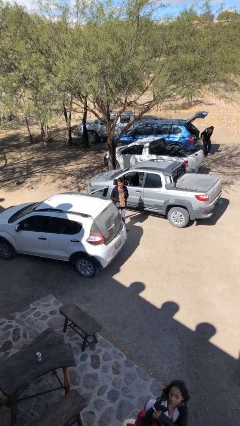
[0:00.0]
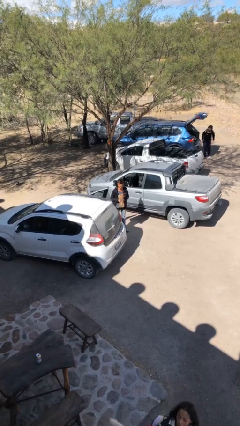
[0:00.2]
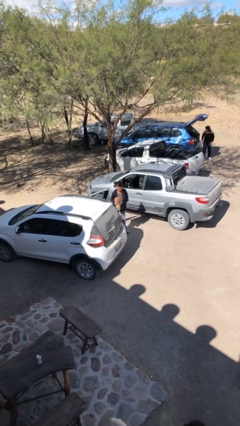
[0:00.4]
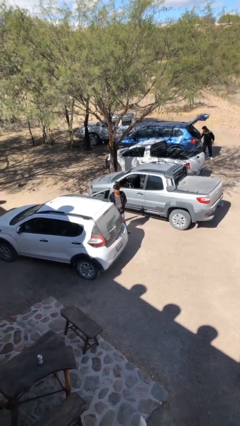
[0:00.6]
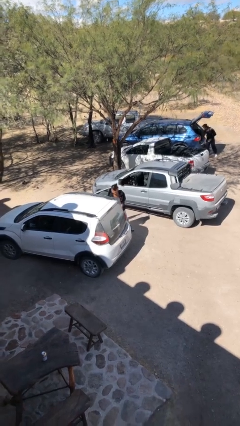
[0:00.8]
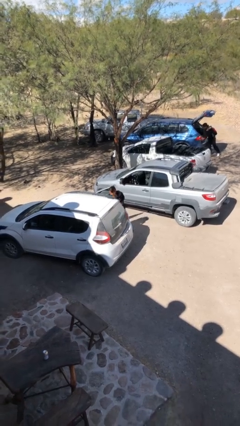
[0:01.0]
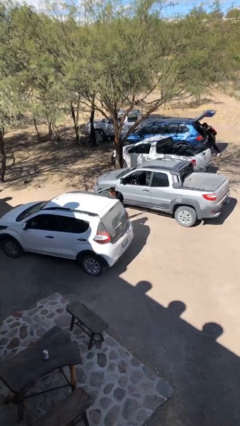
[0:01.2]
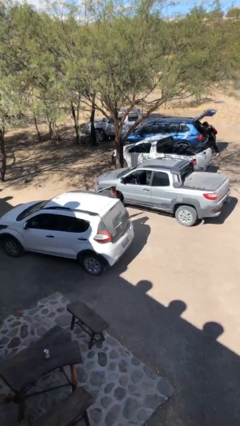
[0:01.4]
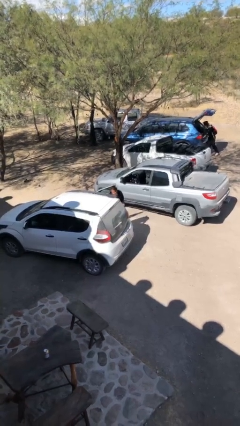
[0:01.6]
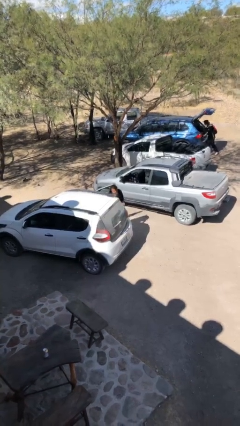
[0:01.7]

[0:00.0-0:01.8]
person loads car

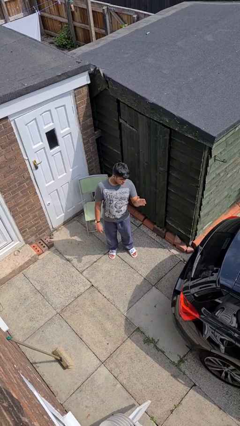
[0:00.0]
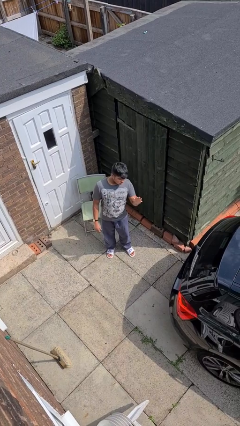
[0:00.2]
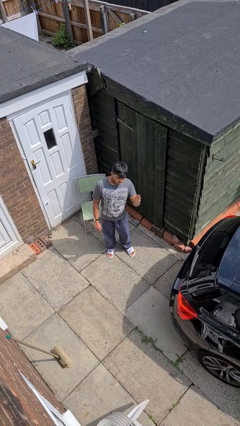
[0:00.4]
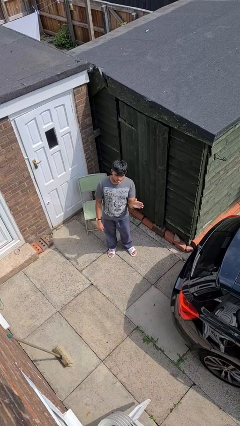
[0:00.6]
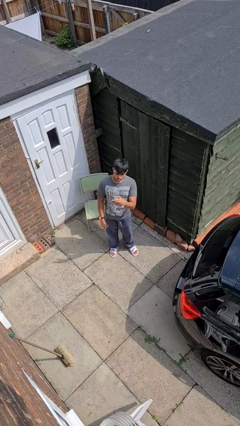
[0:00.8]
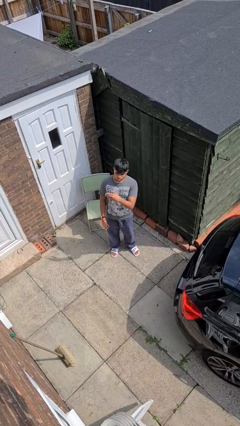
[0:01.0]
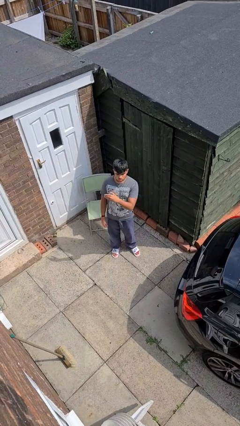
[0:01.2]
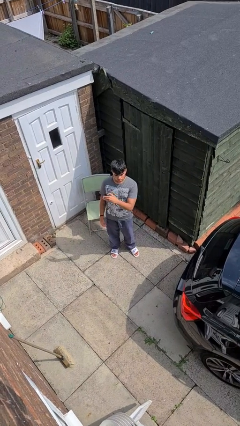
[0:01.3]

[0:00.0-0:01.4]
person gestures swipe right

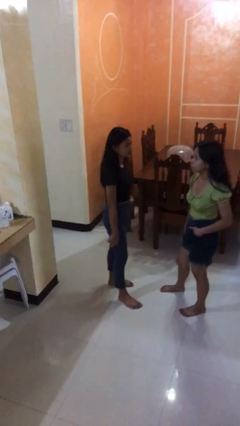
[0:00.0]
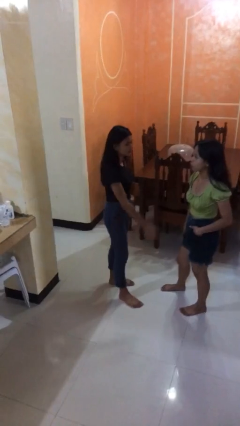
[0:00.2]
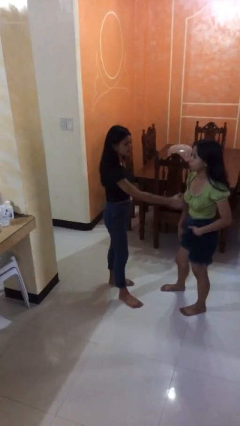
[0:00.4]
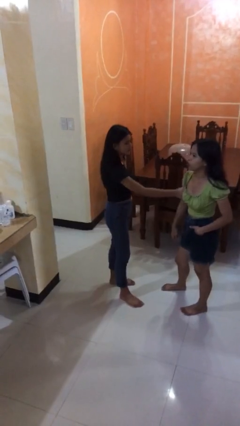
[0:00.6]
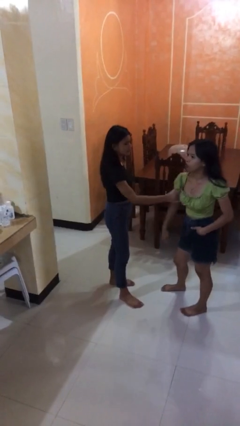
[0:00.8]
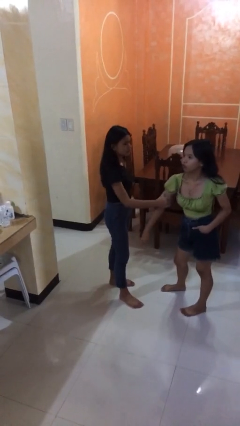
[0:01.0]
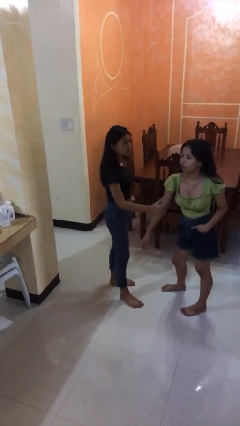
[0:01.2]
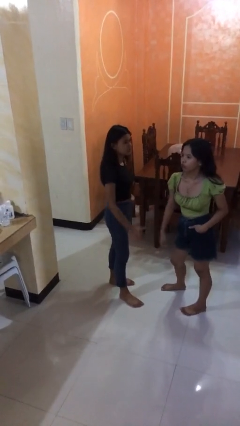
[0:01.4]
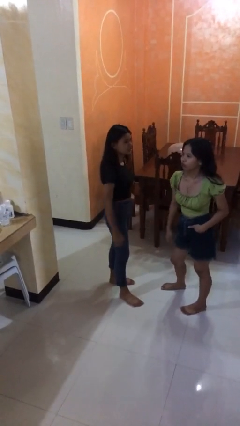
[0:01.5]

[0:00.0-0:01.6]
person grabs person by bicep

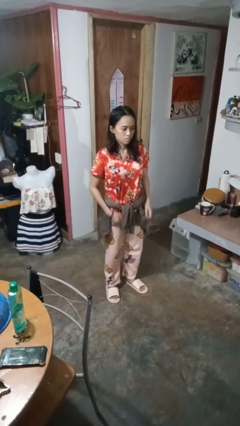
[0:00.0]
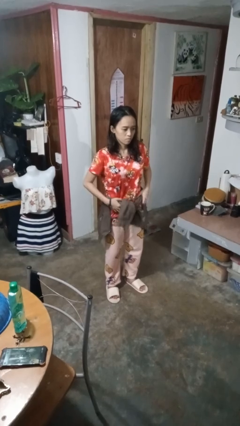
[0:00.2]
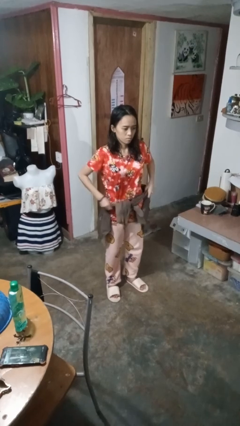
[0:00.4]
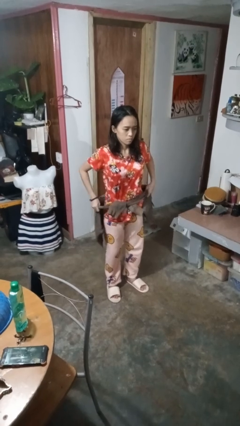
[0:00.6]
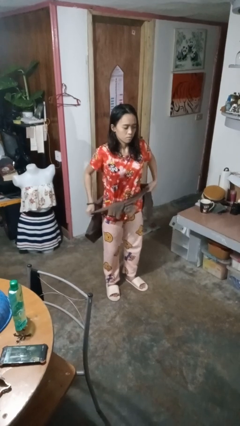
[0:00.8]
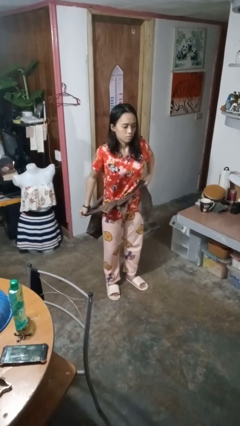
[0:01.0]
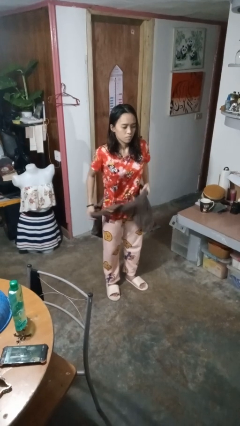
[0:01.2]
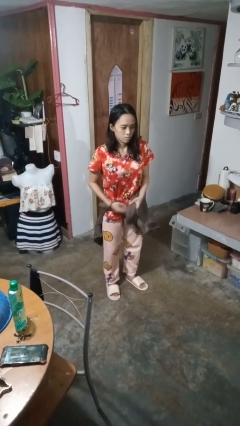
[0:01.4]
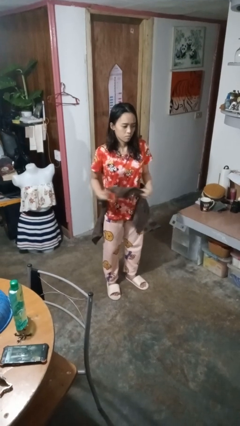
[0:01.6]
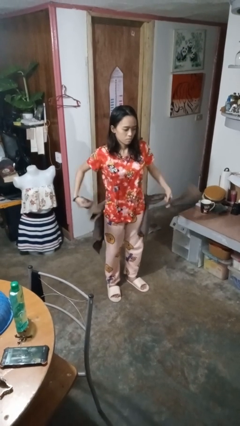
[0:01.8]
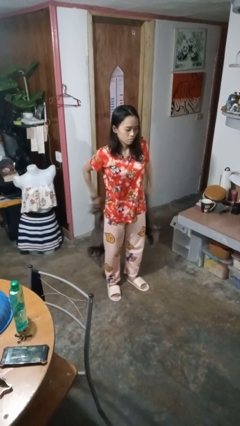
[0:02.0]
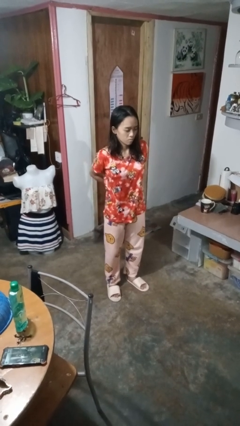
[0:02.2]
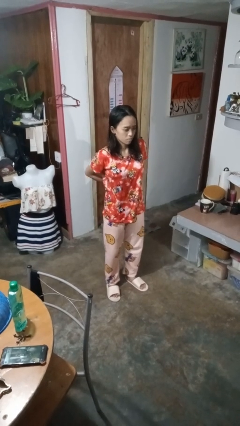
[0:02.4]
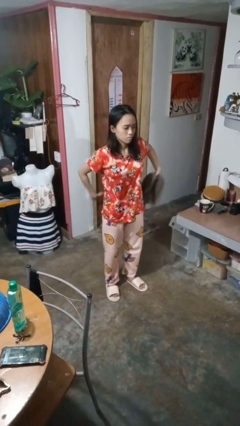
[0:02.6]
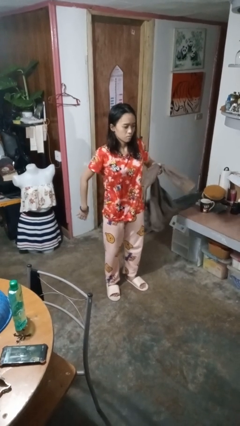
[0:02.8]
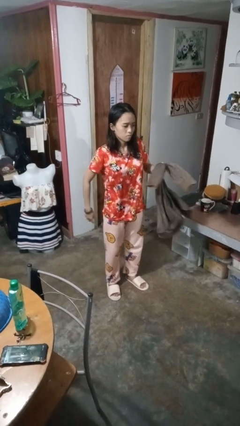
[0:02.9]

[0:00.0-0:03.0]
person unties jacket around waist

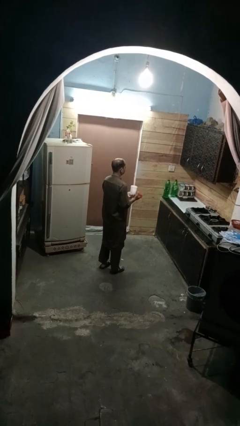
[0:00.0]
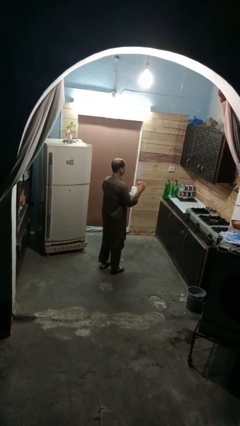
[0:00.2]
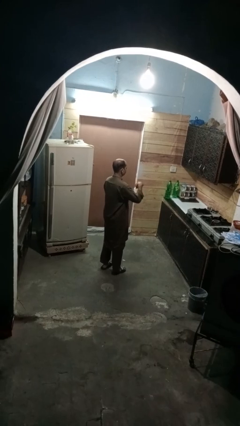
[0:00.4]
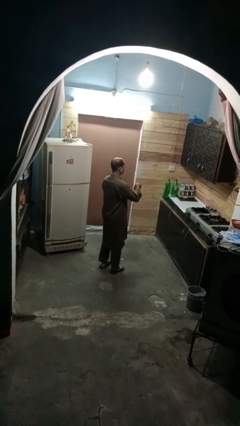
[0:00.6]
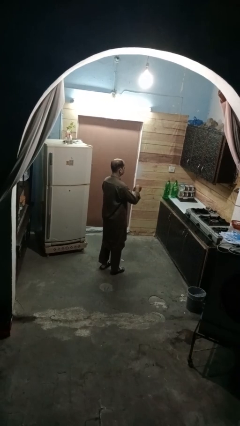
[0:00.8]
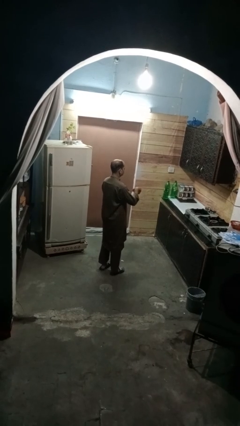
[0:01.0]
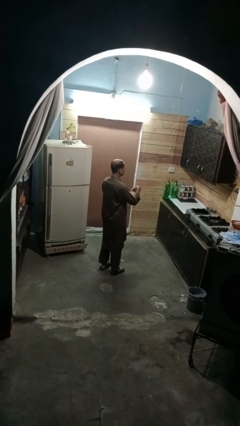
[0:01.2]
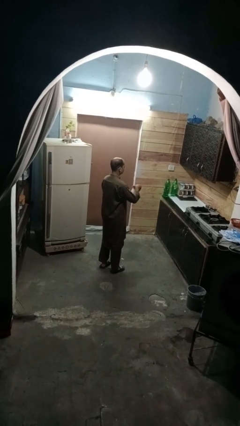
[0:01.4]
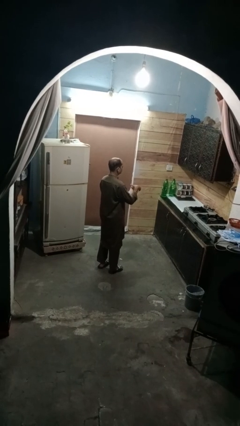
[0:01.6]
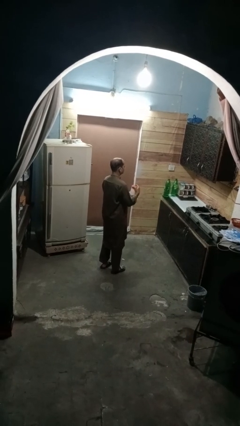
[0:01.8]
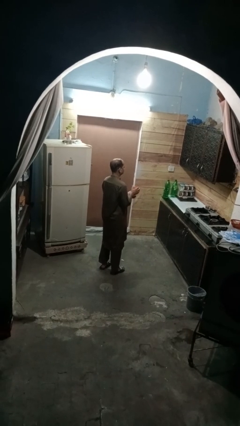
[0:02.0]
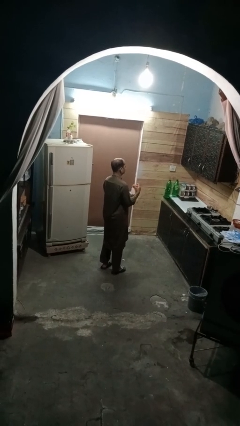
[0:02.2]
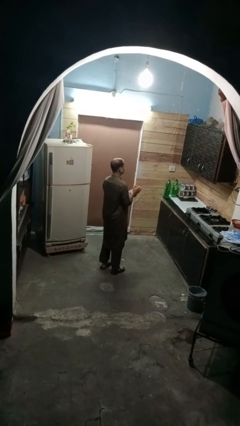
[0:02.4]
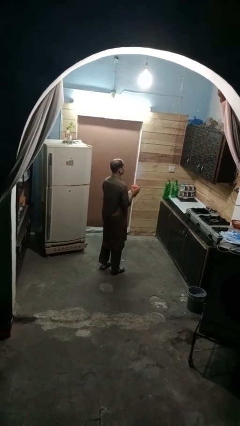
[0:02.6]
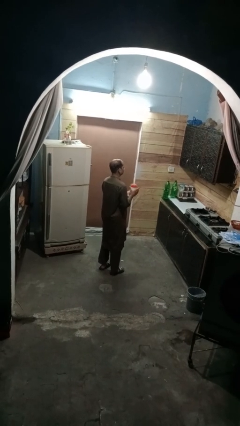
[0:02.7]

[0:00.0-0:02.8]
person closes jar

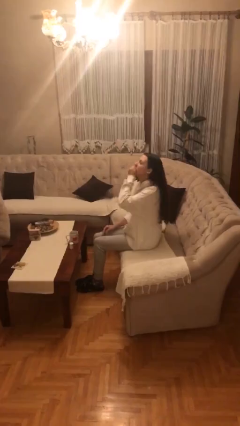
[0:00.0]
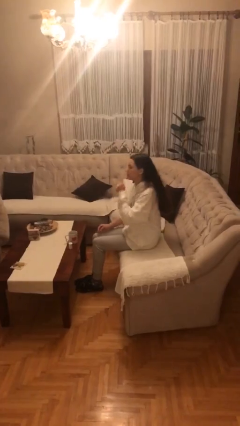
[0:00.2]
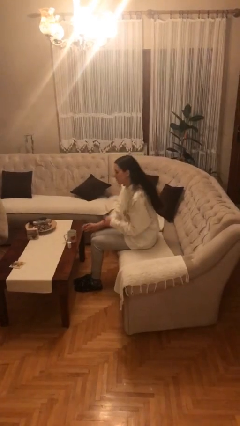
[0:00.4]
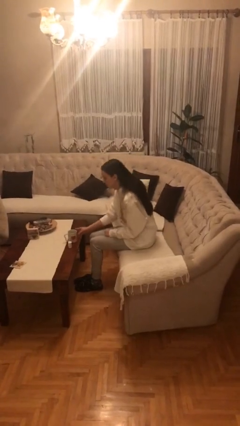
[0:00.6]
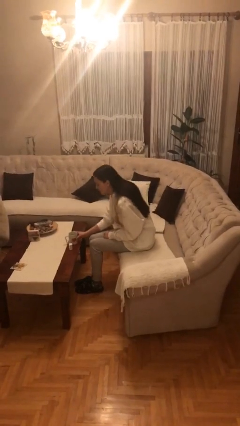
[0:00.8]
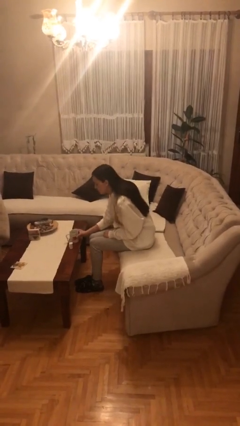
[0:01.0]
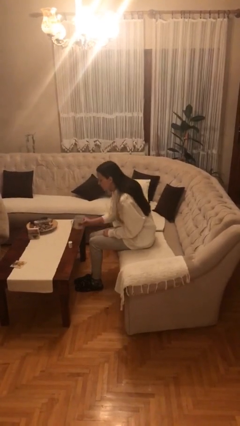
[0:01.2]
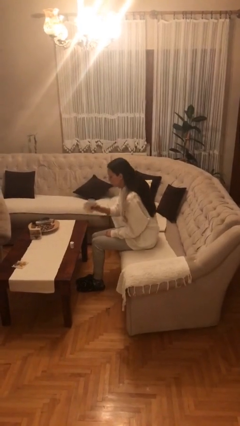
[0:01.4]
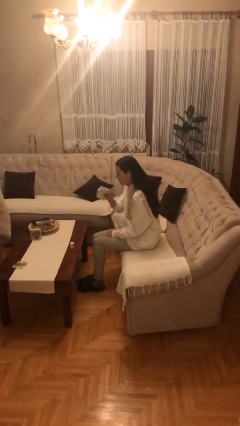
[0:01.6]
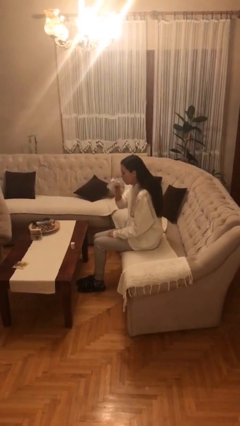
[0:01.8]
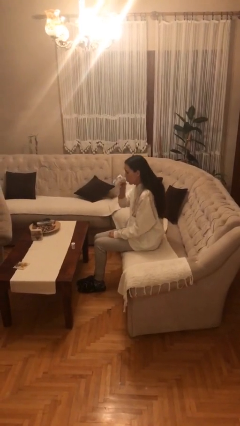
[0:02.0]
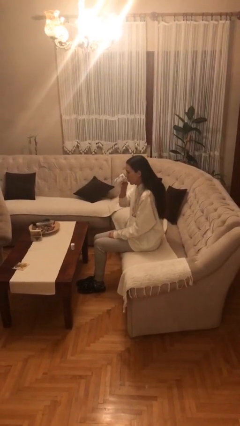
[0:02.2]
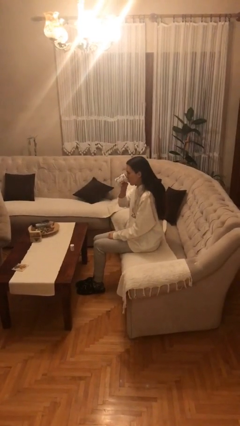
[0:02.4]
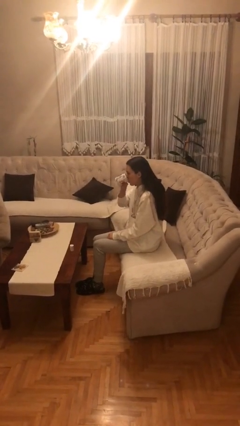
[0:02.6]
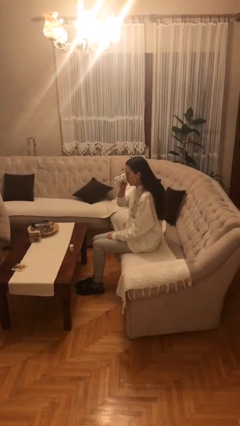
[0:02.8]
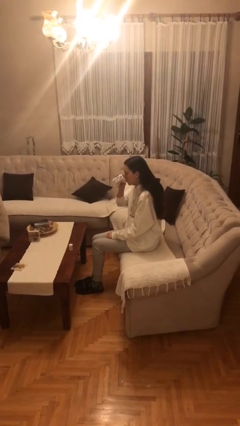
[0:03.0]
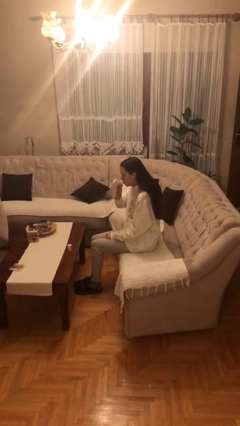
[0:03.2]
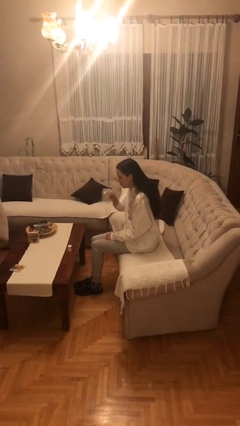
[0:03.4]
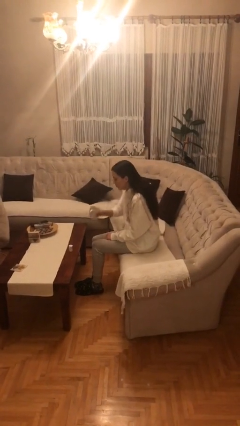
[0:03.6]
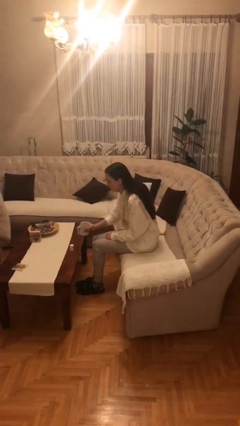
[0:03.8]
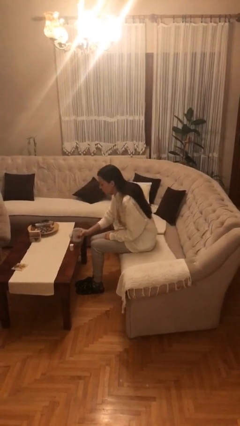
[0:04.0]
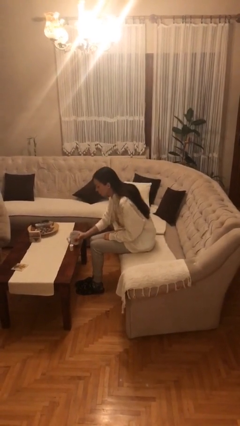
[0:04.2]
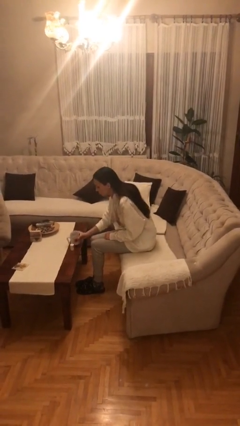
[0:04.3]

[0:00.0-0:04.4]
person drinks from cup

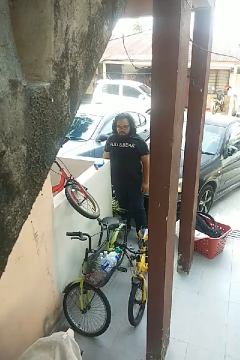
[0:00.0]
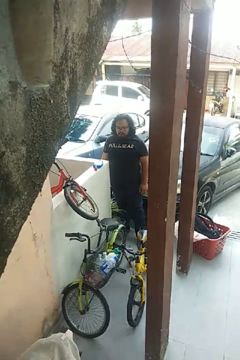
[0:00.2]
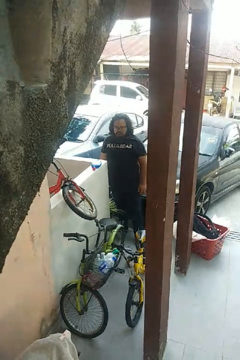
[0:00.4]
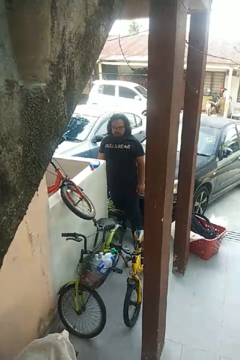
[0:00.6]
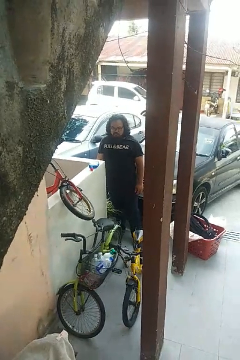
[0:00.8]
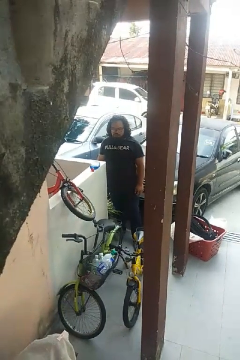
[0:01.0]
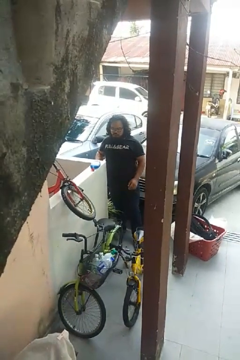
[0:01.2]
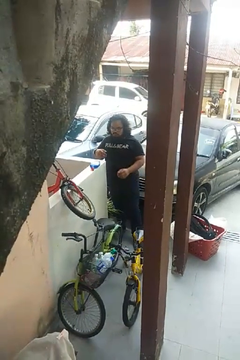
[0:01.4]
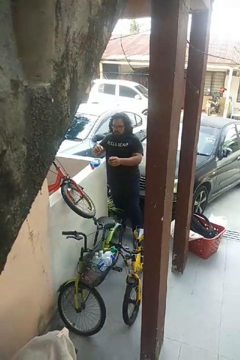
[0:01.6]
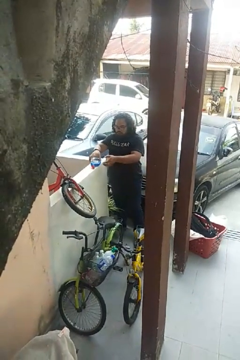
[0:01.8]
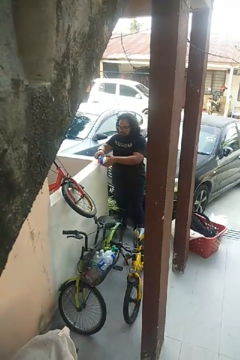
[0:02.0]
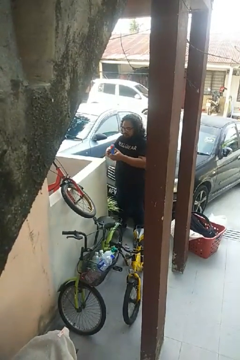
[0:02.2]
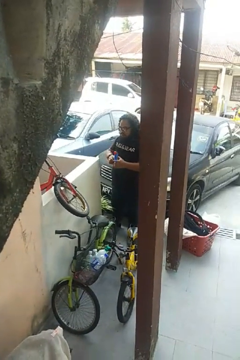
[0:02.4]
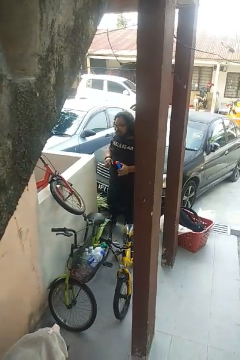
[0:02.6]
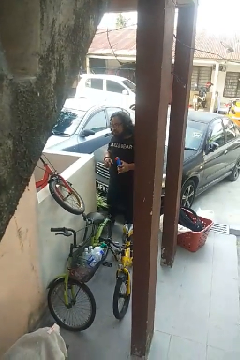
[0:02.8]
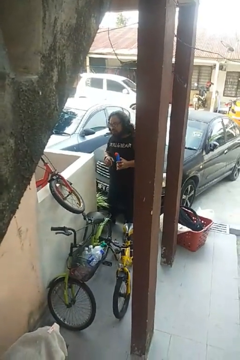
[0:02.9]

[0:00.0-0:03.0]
person picks up object from countertop
